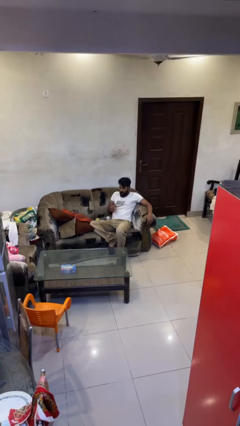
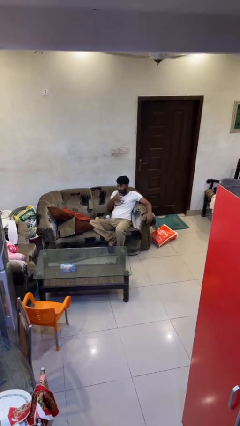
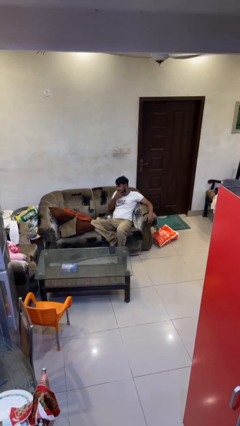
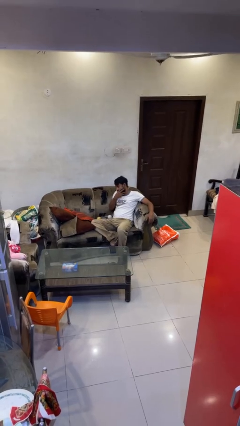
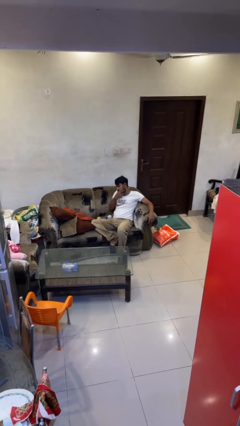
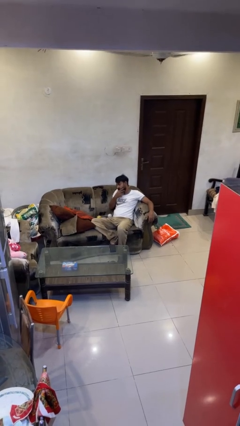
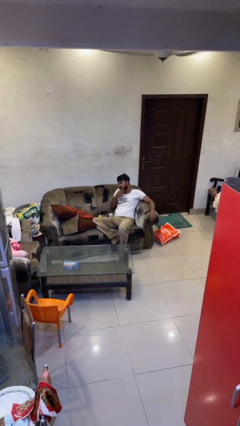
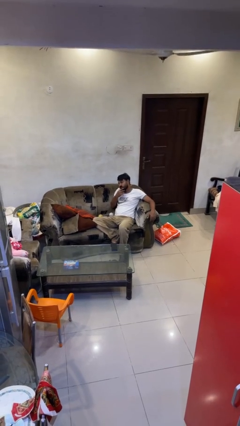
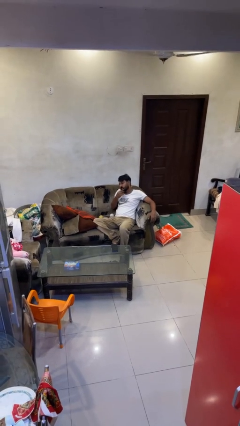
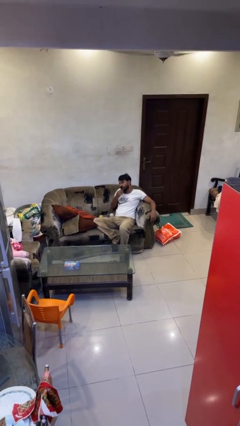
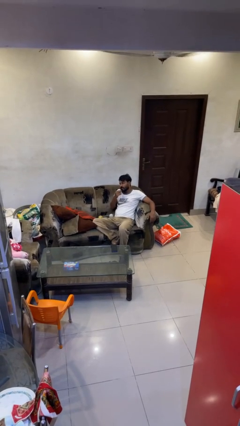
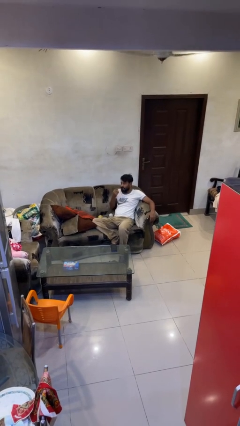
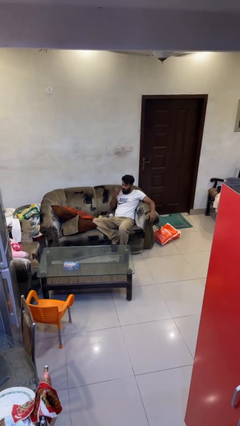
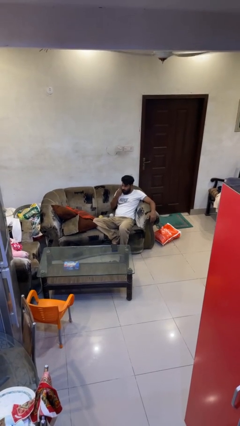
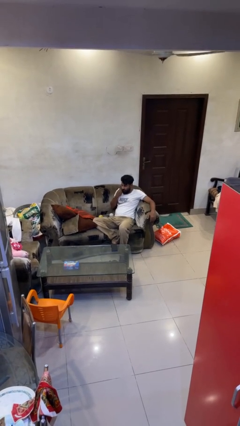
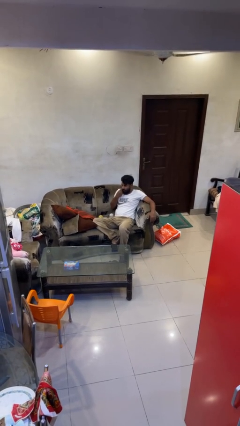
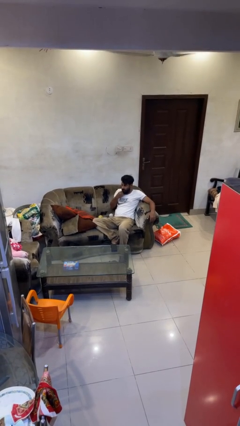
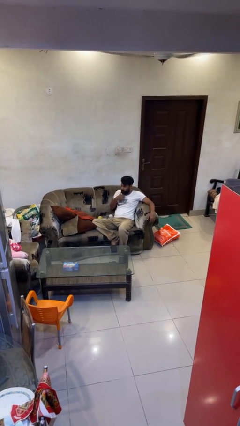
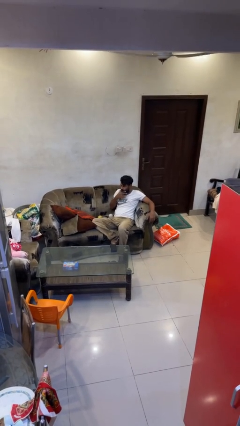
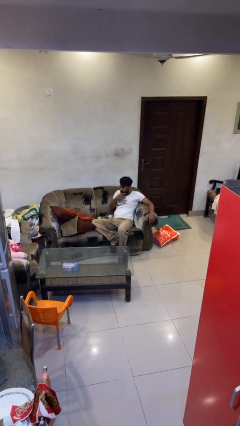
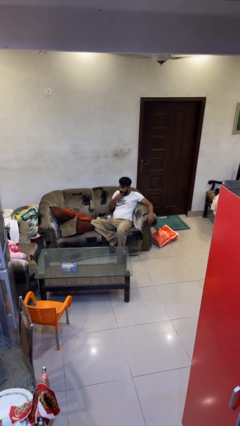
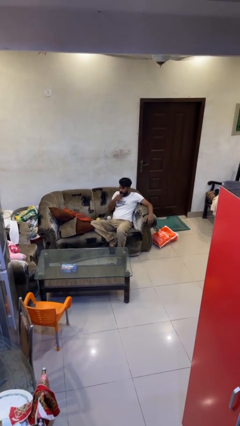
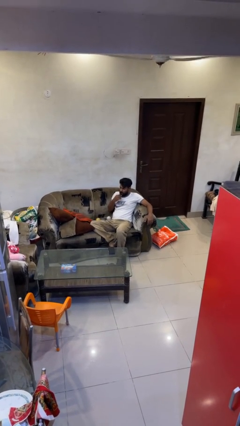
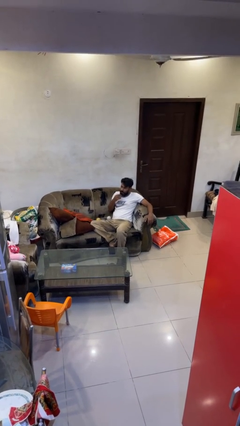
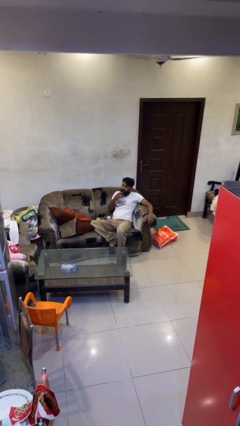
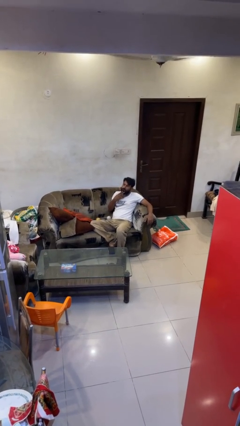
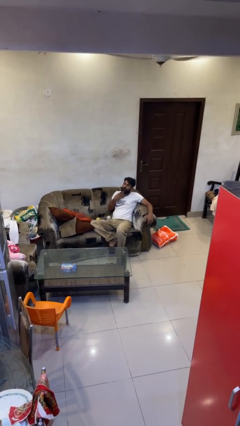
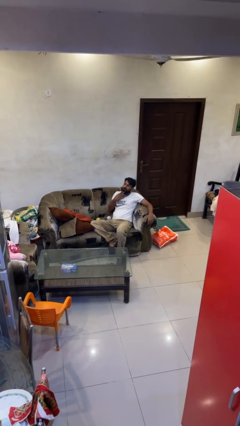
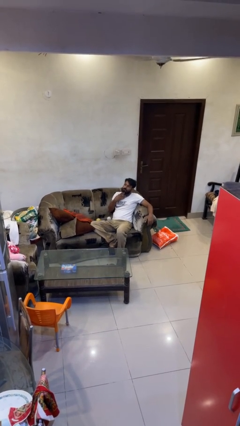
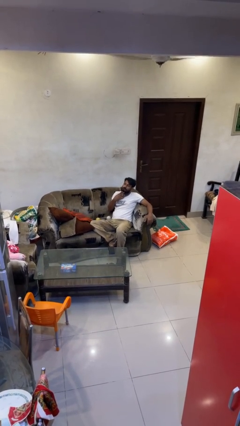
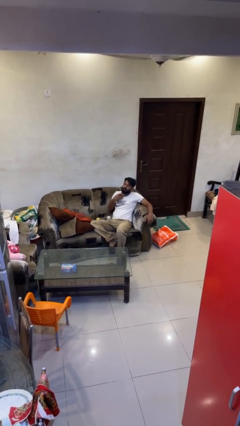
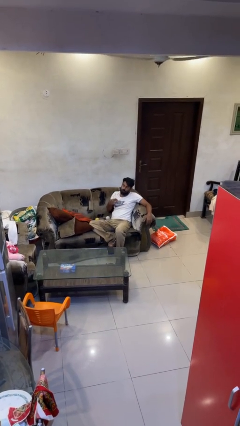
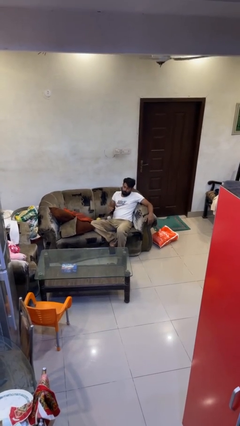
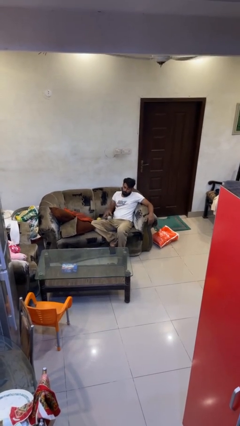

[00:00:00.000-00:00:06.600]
person strokes chin

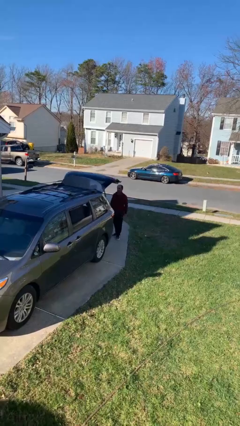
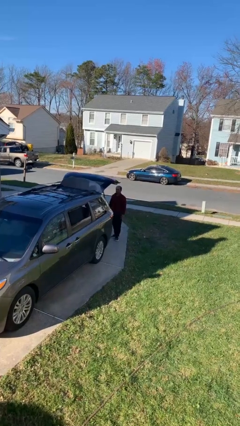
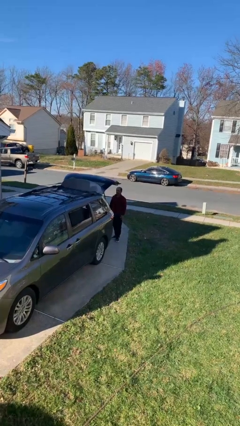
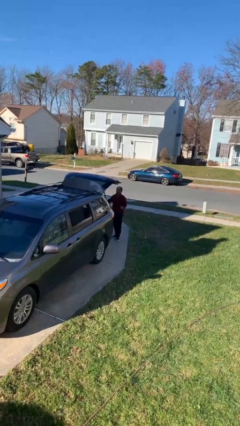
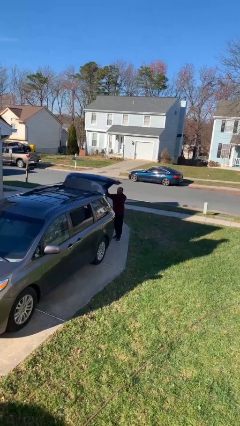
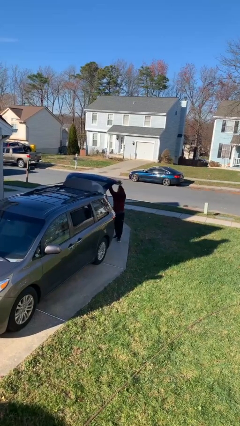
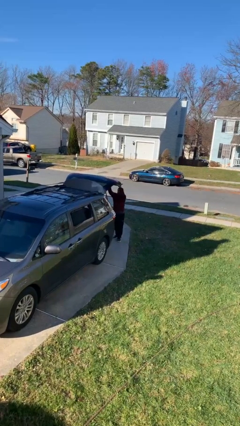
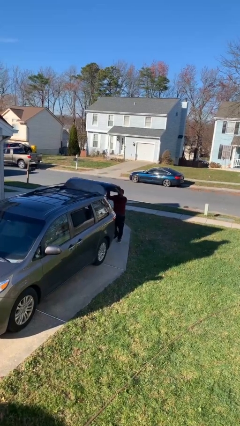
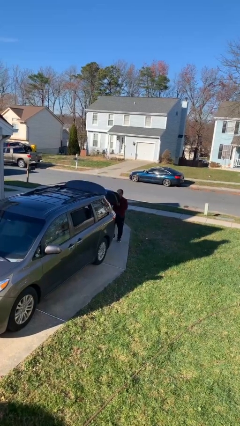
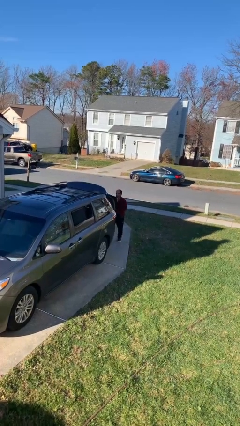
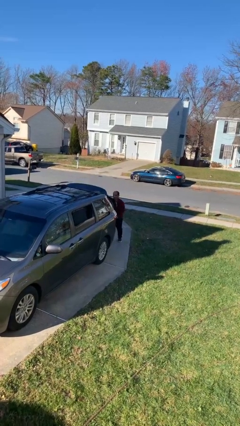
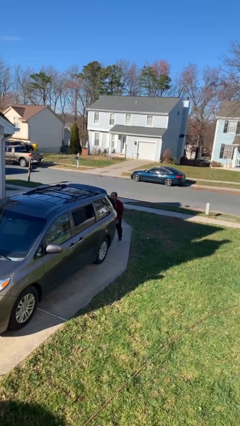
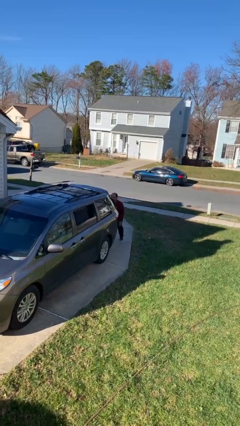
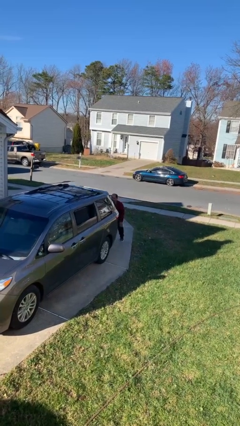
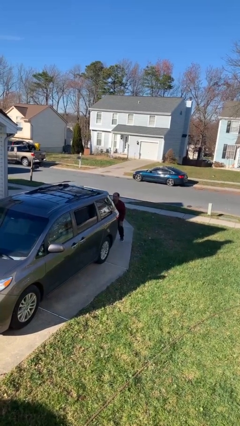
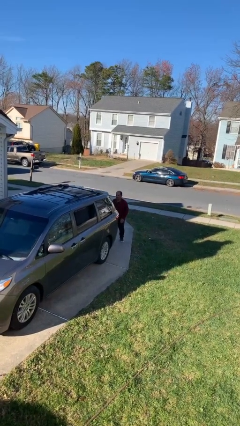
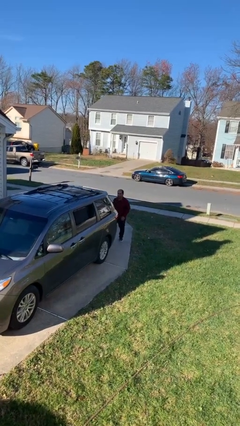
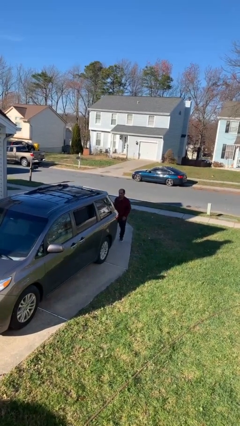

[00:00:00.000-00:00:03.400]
person closes car trunk

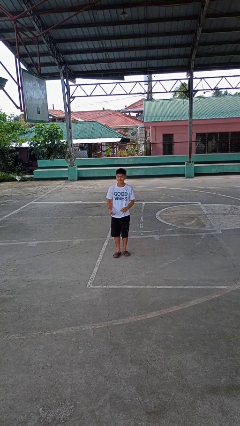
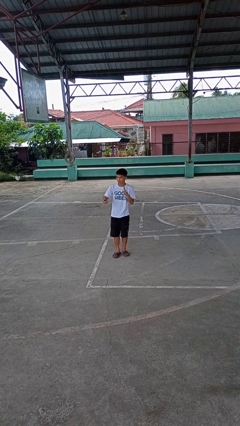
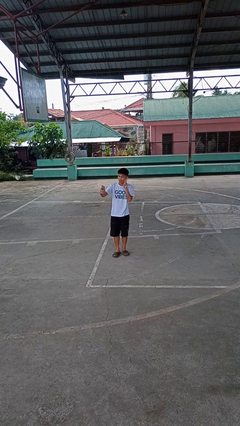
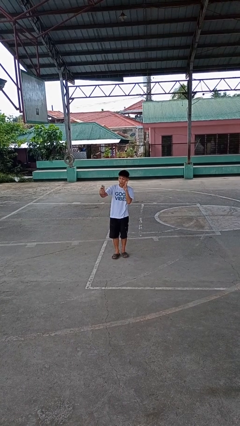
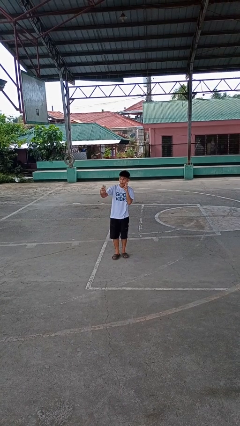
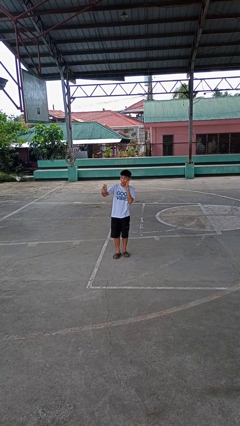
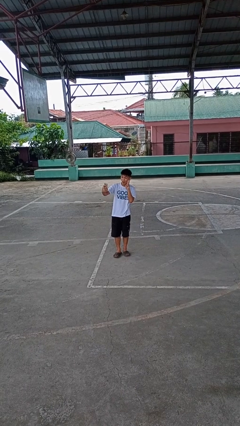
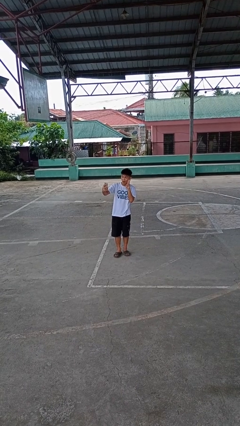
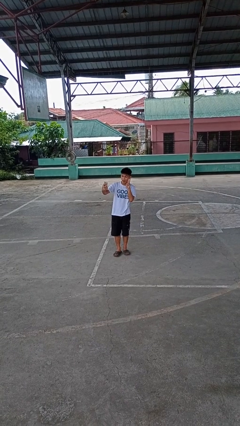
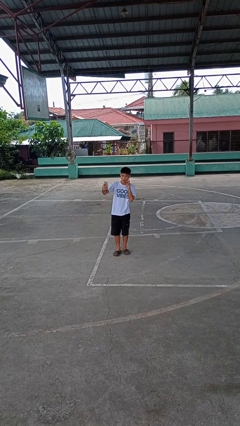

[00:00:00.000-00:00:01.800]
person takes selfie

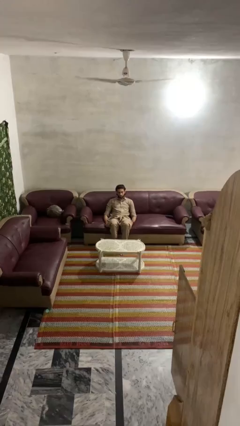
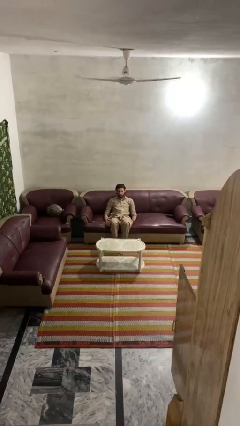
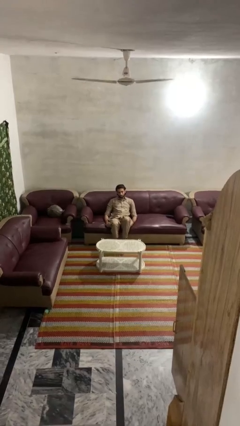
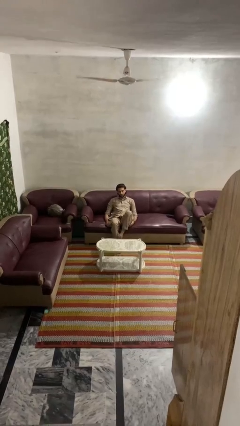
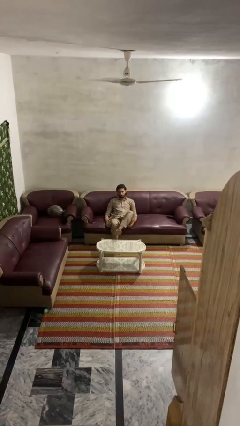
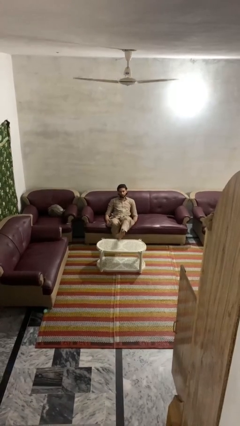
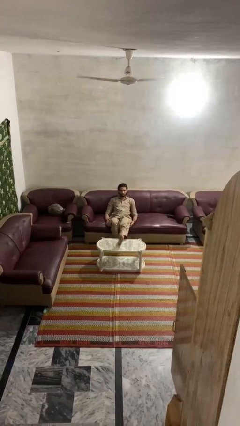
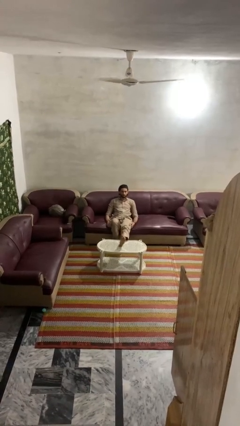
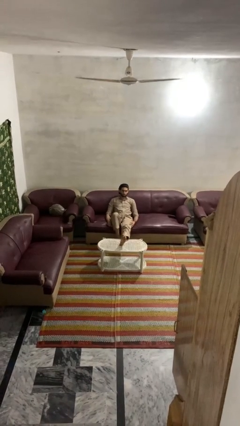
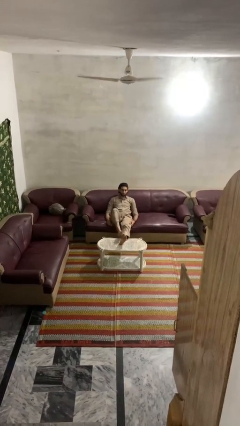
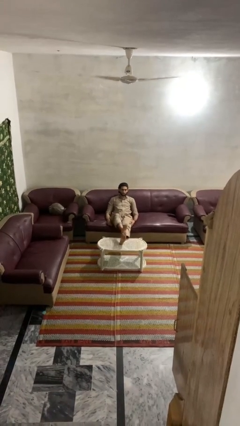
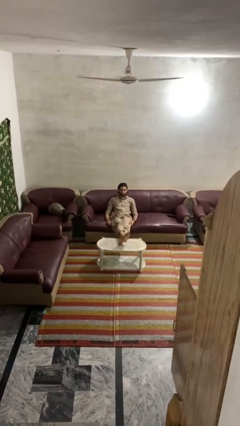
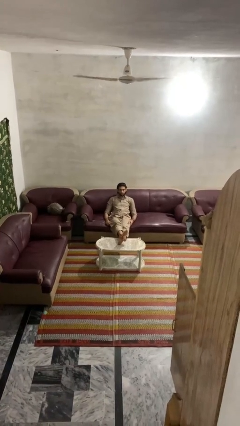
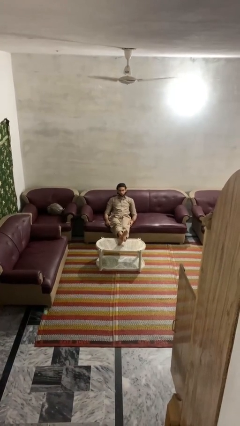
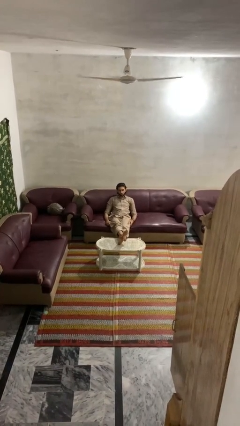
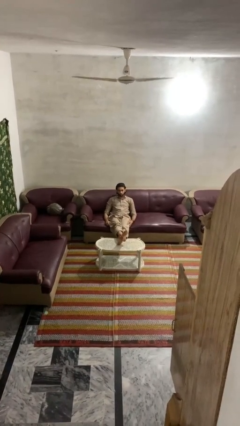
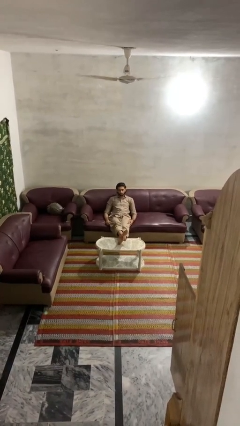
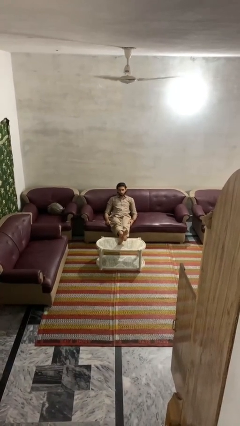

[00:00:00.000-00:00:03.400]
person puts feet up

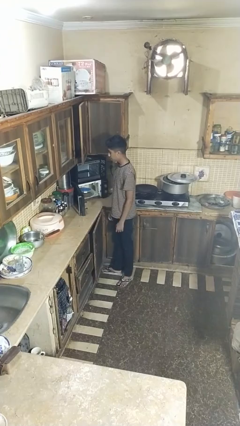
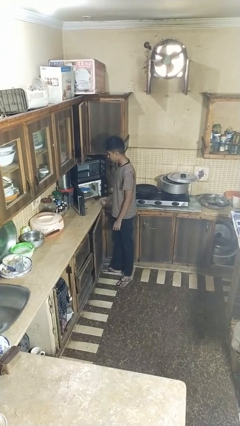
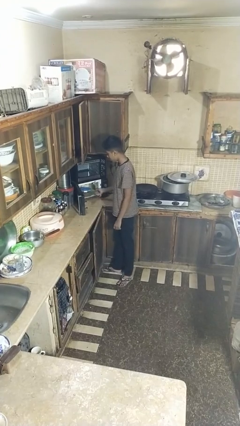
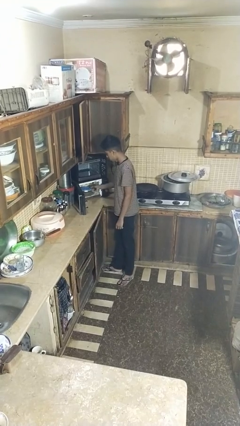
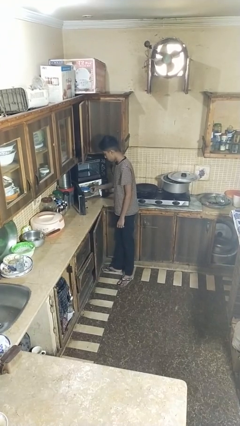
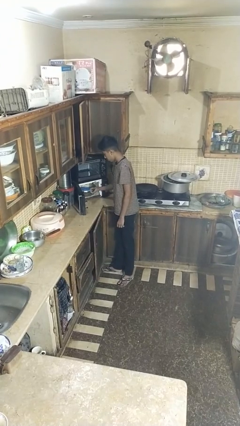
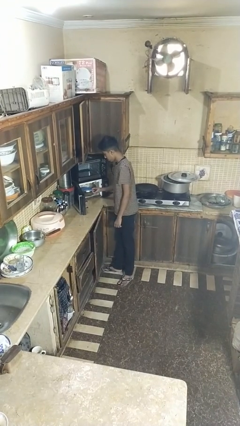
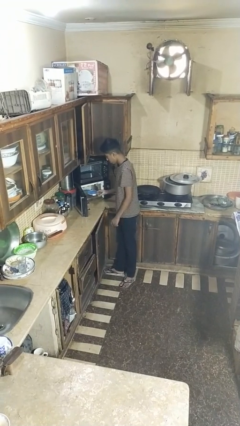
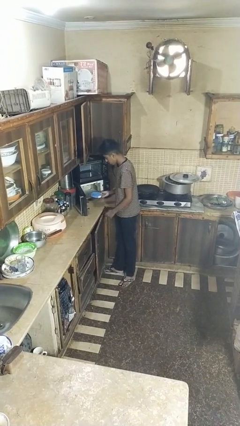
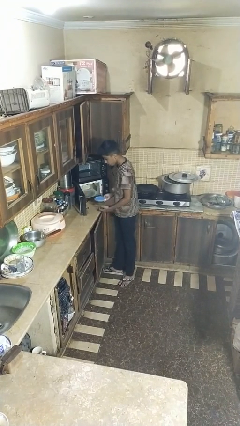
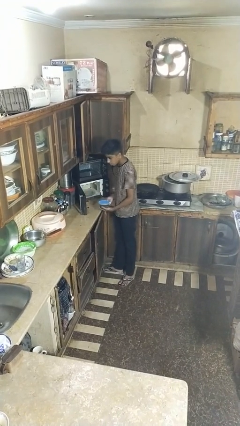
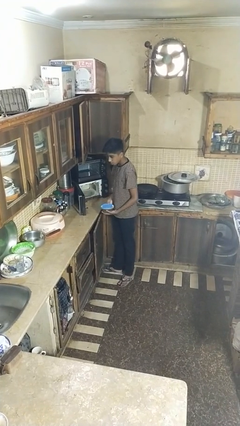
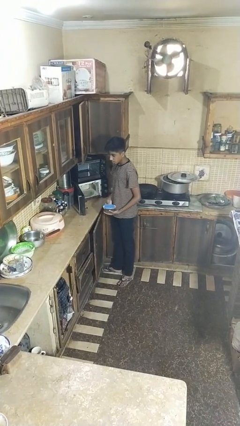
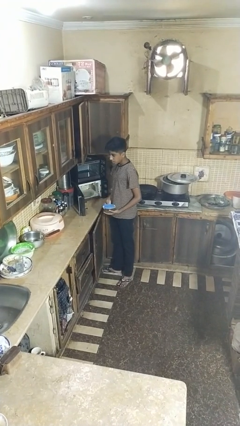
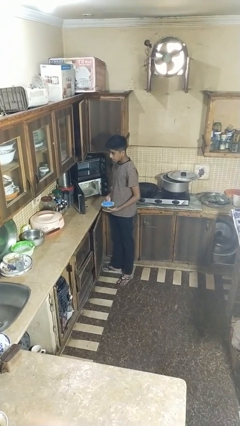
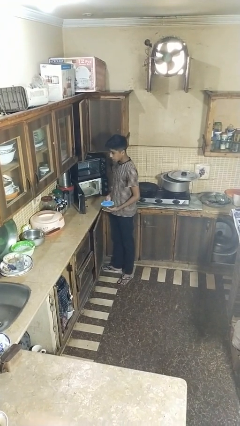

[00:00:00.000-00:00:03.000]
person takes object from microwave
